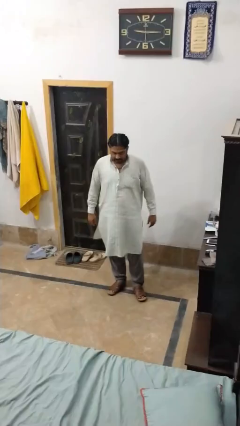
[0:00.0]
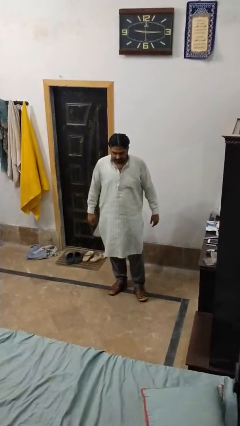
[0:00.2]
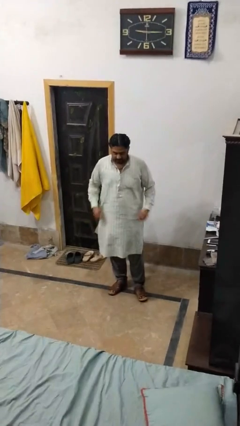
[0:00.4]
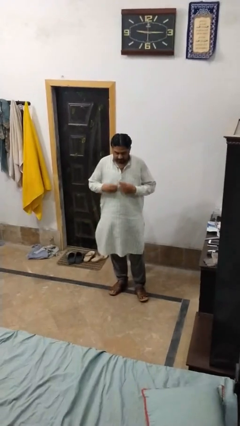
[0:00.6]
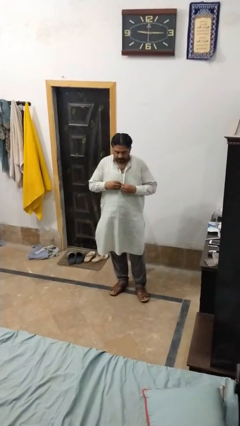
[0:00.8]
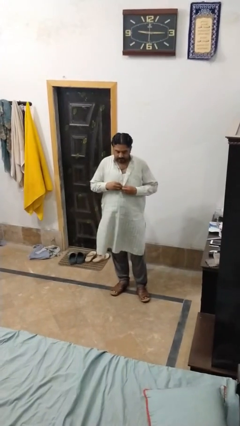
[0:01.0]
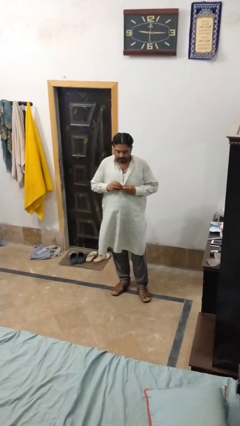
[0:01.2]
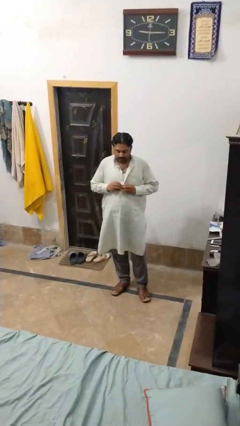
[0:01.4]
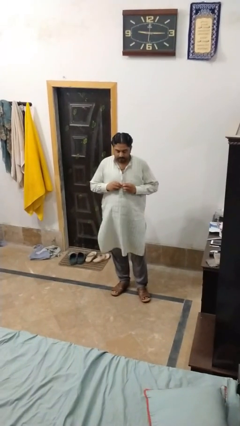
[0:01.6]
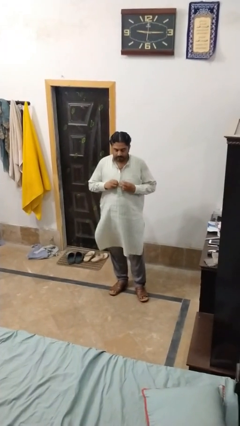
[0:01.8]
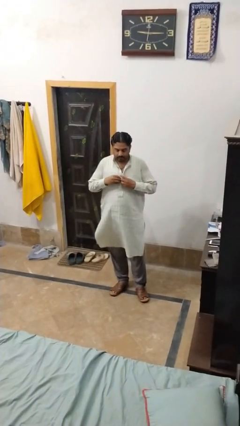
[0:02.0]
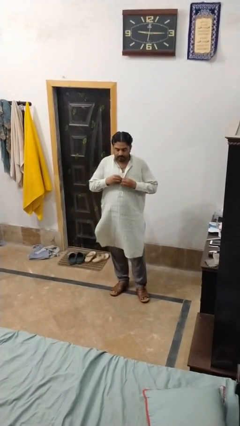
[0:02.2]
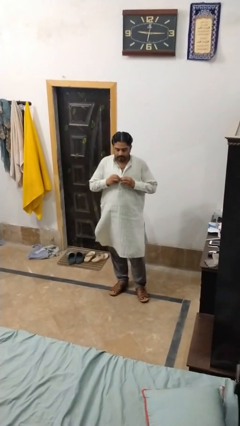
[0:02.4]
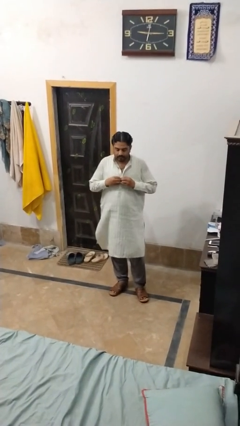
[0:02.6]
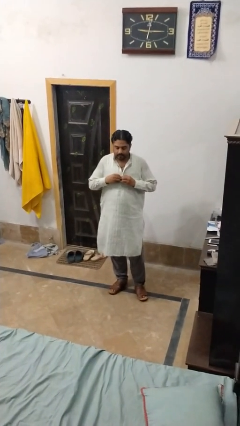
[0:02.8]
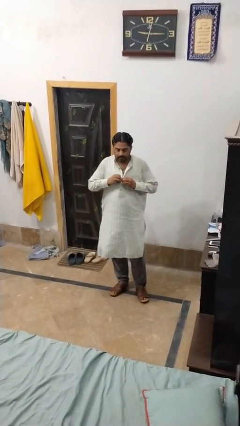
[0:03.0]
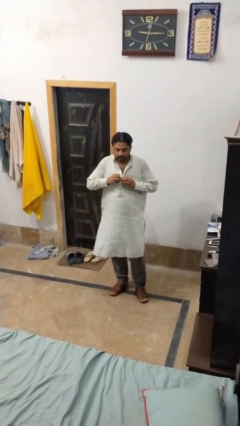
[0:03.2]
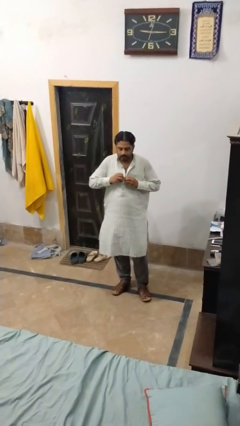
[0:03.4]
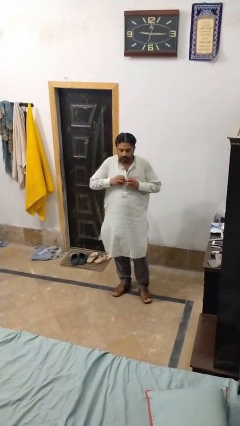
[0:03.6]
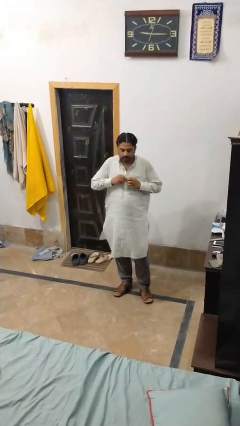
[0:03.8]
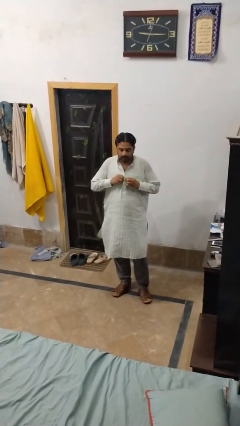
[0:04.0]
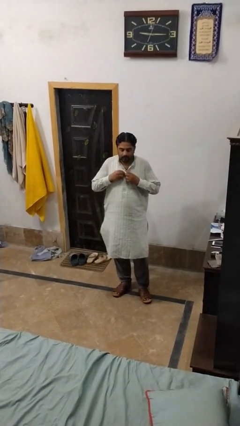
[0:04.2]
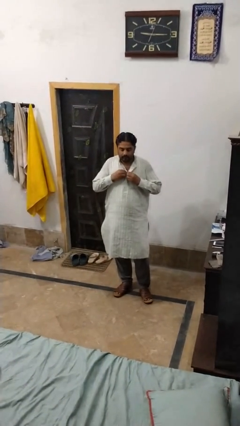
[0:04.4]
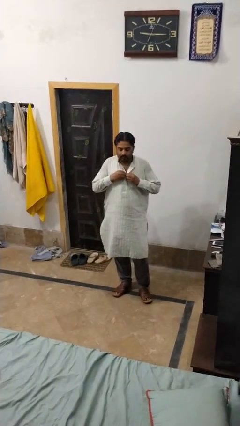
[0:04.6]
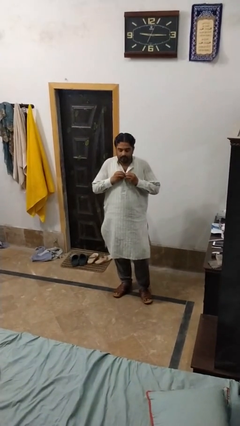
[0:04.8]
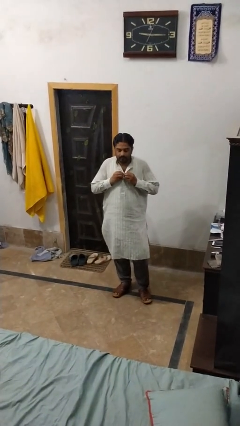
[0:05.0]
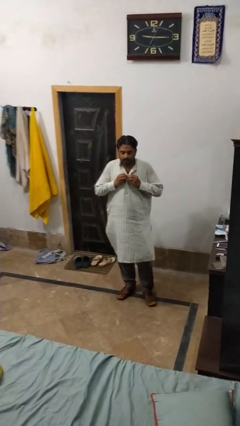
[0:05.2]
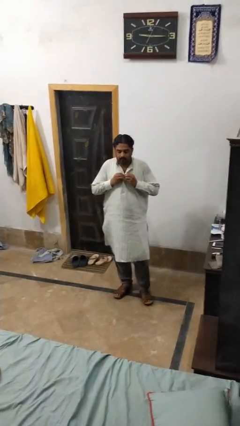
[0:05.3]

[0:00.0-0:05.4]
person buttons shirt

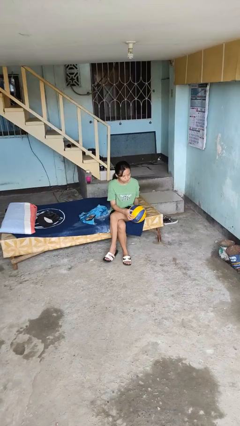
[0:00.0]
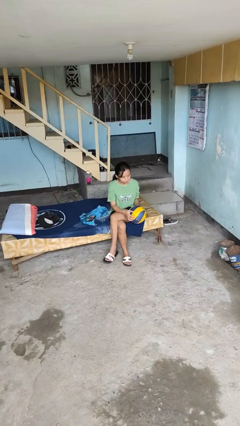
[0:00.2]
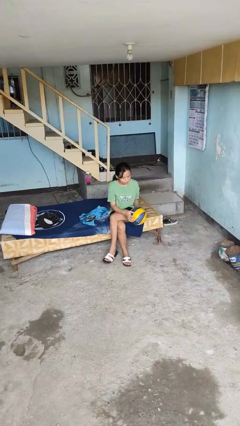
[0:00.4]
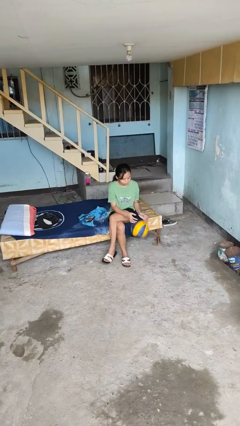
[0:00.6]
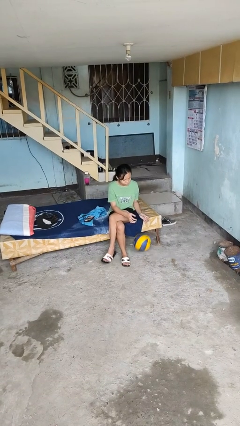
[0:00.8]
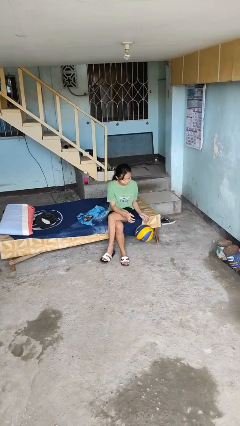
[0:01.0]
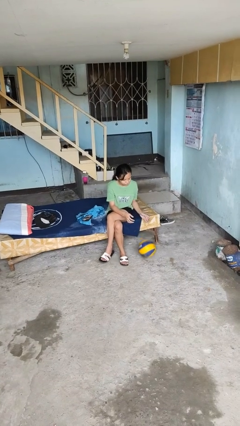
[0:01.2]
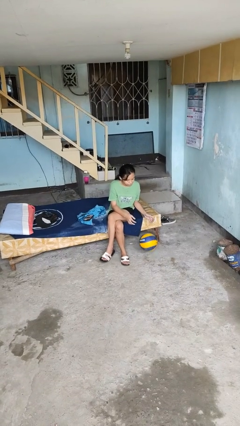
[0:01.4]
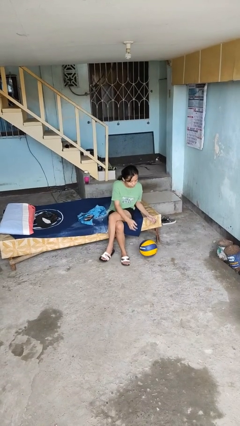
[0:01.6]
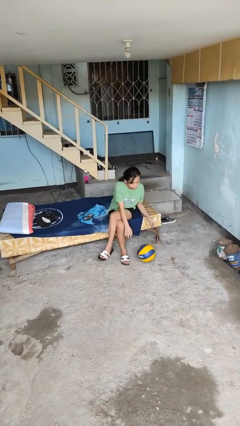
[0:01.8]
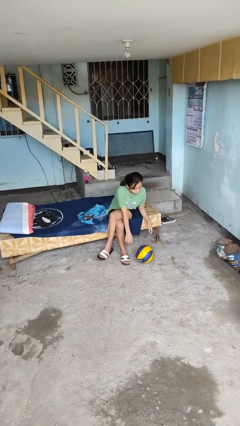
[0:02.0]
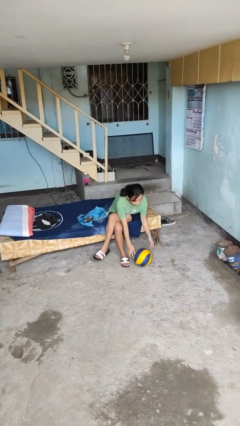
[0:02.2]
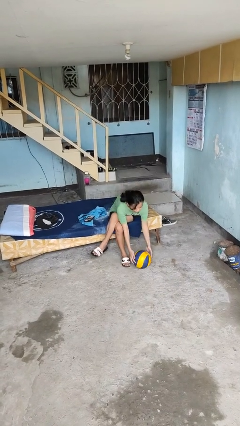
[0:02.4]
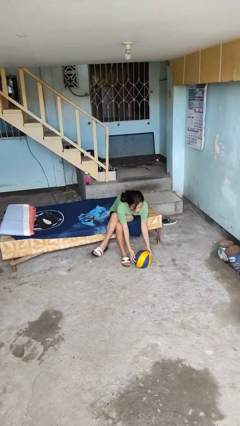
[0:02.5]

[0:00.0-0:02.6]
person drops object

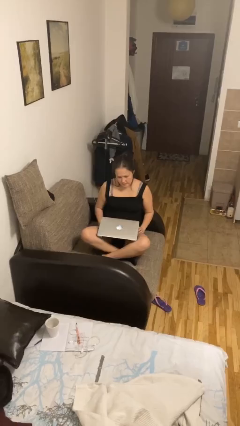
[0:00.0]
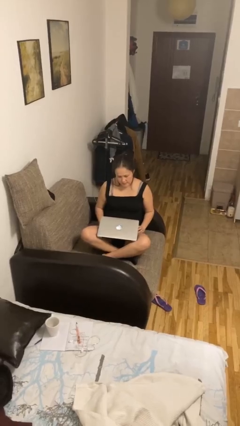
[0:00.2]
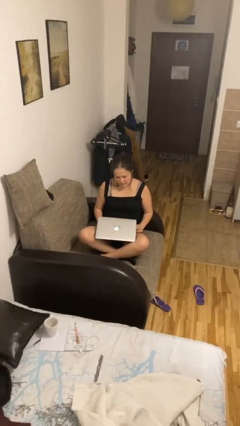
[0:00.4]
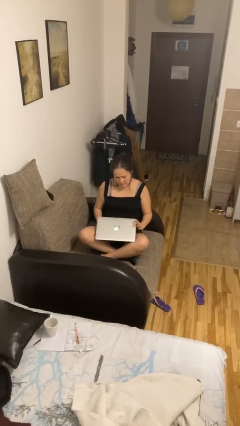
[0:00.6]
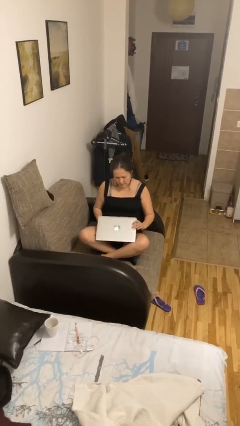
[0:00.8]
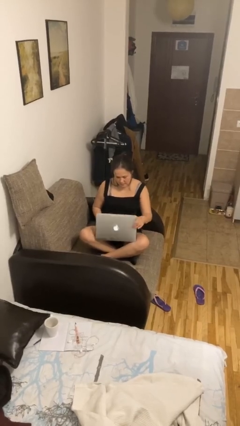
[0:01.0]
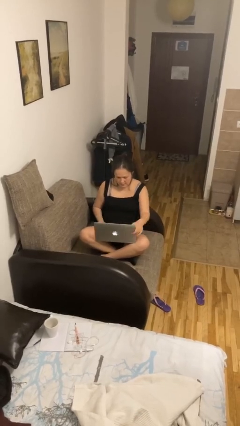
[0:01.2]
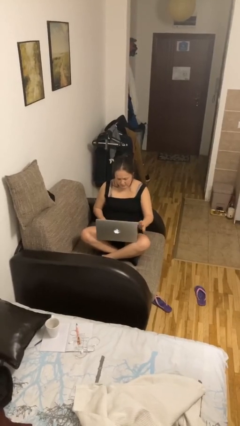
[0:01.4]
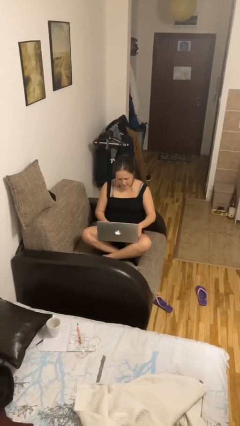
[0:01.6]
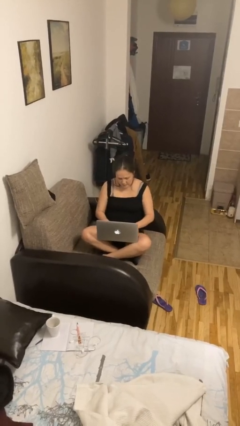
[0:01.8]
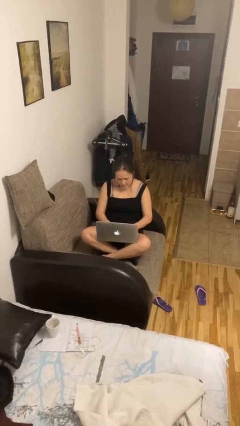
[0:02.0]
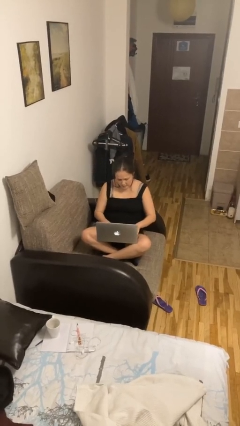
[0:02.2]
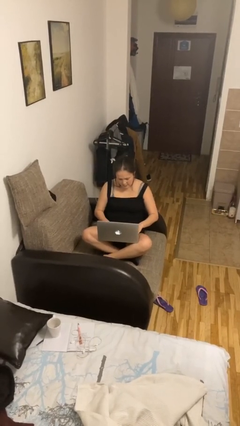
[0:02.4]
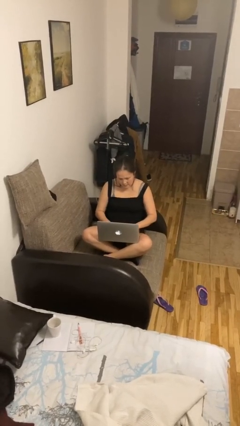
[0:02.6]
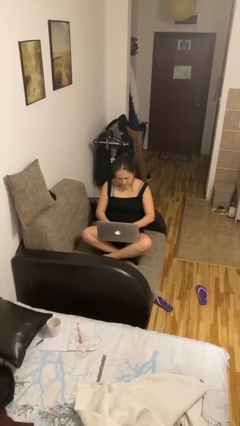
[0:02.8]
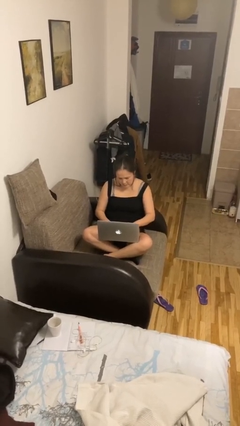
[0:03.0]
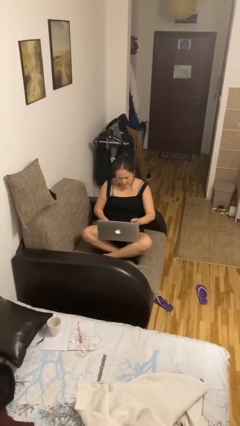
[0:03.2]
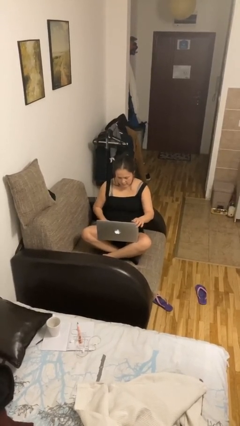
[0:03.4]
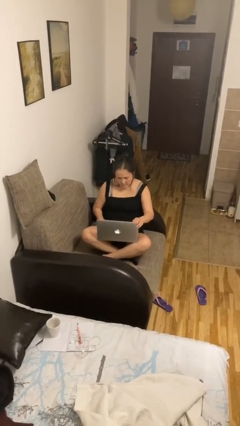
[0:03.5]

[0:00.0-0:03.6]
person interacts with laptop

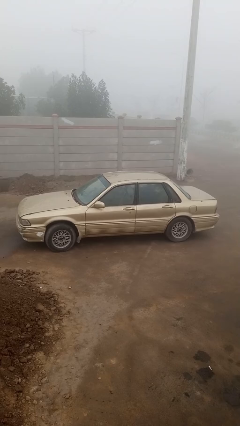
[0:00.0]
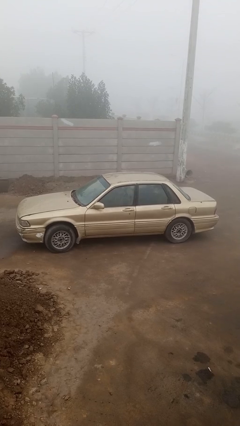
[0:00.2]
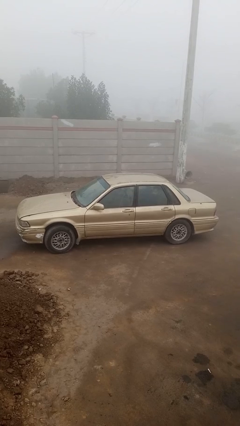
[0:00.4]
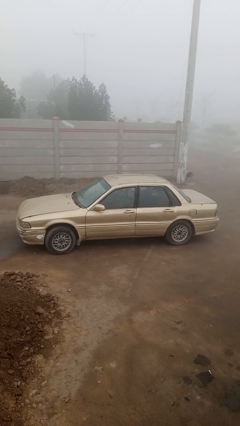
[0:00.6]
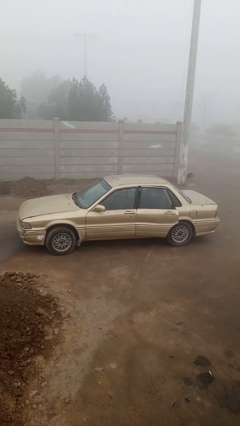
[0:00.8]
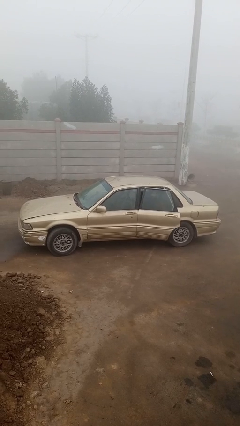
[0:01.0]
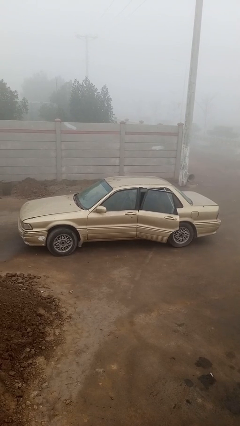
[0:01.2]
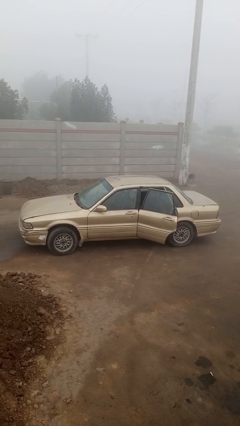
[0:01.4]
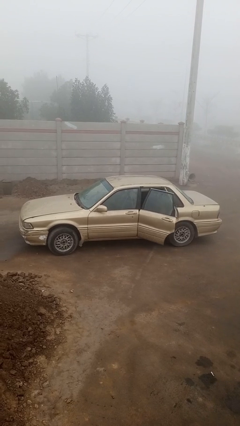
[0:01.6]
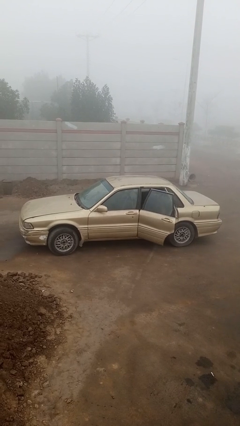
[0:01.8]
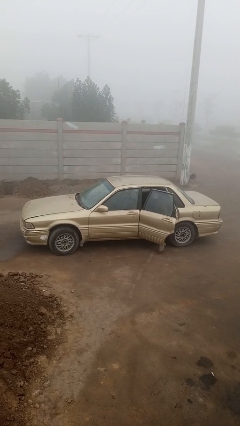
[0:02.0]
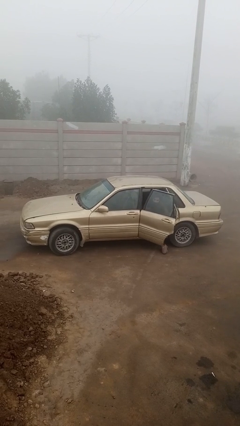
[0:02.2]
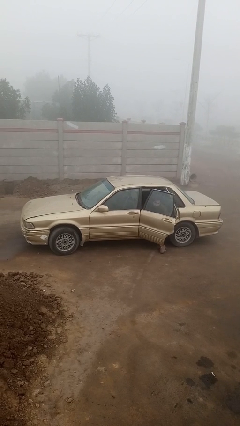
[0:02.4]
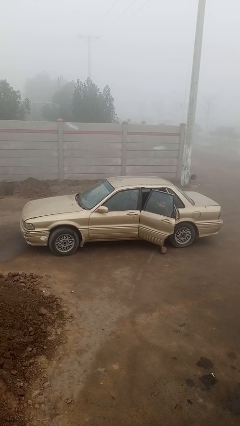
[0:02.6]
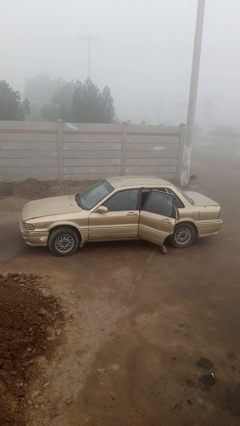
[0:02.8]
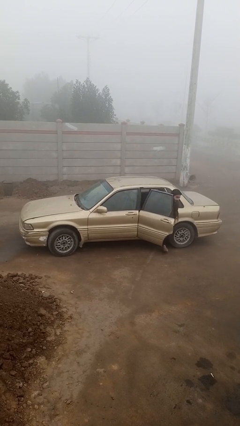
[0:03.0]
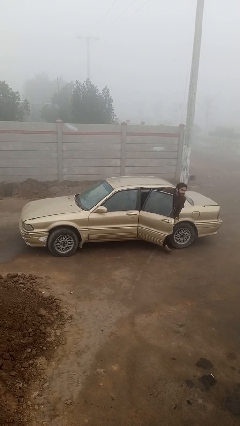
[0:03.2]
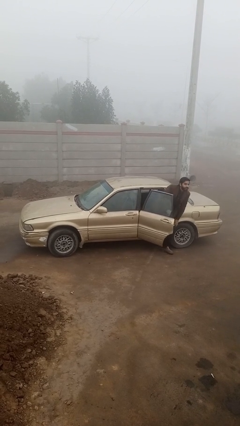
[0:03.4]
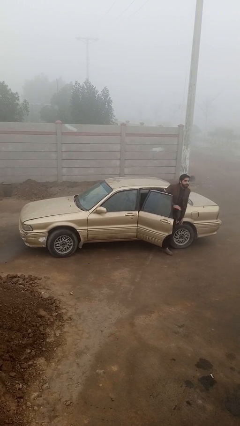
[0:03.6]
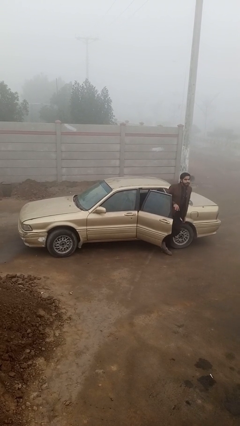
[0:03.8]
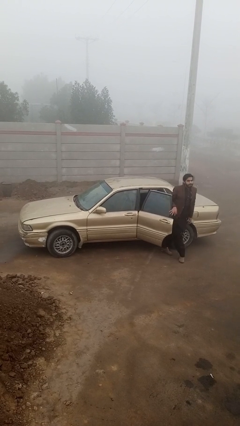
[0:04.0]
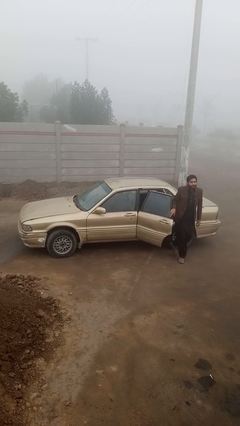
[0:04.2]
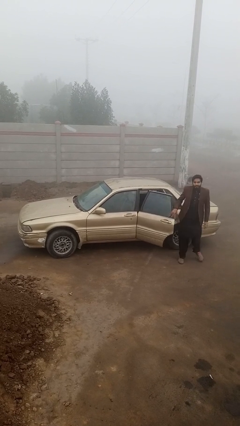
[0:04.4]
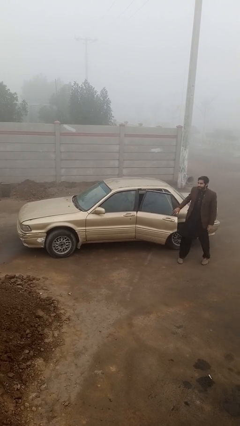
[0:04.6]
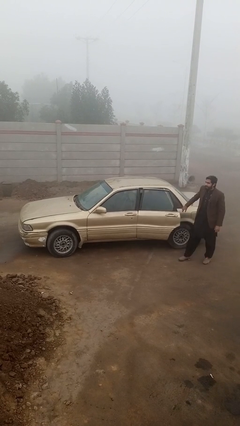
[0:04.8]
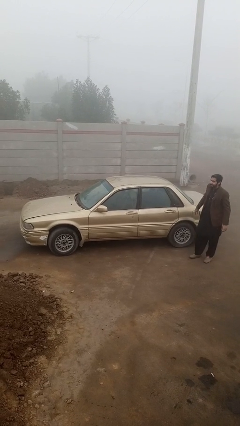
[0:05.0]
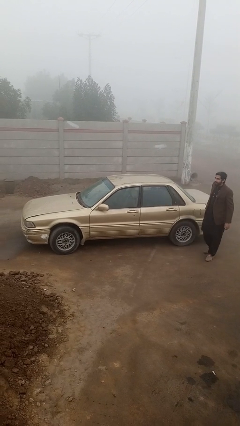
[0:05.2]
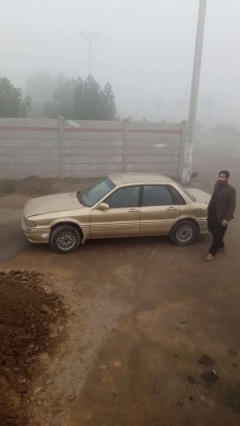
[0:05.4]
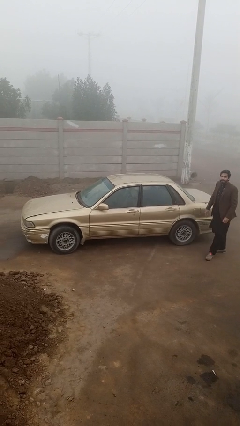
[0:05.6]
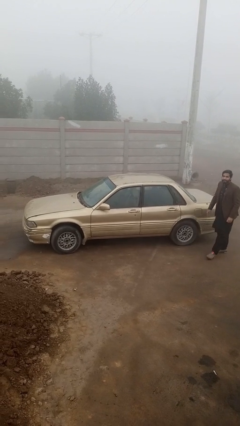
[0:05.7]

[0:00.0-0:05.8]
car drops off person

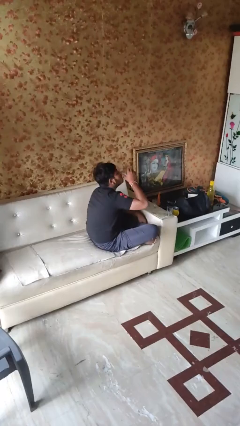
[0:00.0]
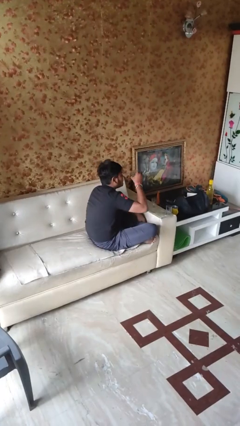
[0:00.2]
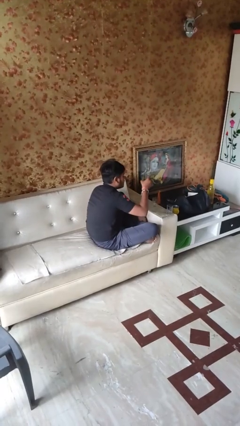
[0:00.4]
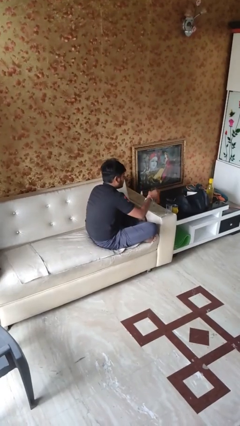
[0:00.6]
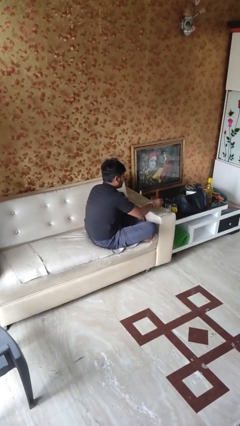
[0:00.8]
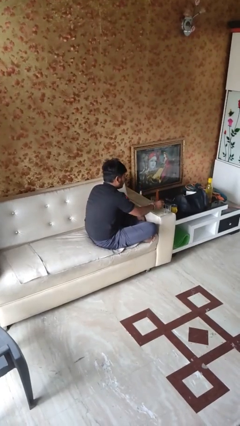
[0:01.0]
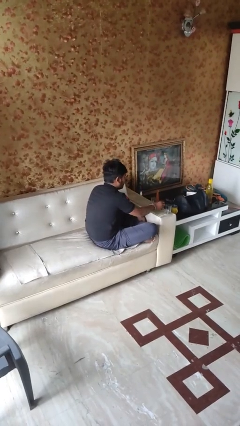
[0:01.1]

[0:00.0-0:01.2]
person puts down object on table
